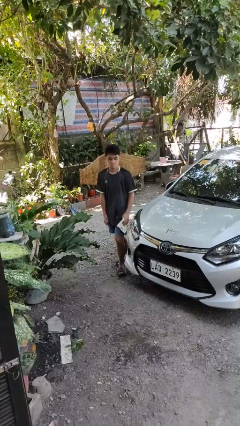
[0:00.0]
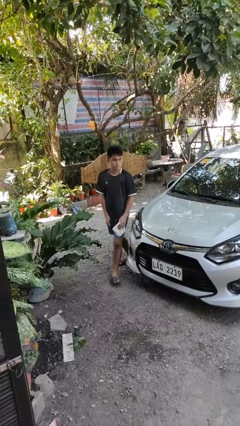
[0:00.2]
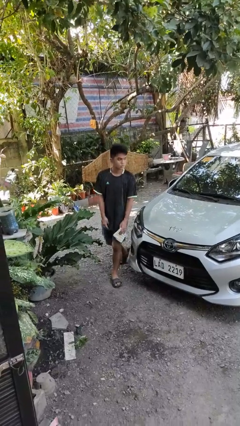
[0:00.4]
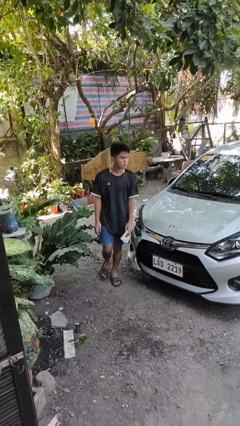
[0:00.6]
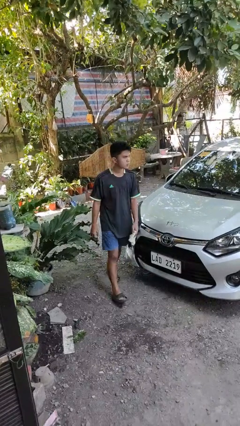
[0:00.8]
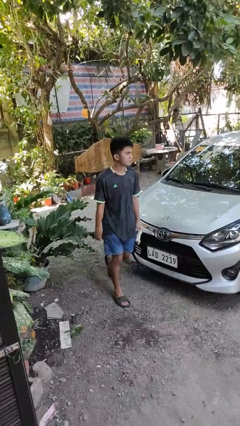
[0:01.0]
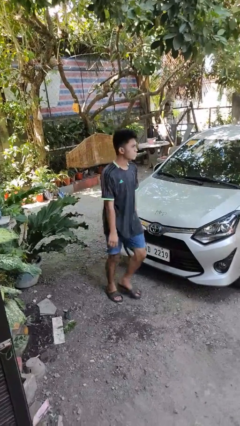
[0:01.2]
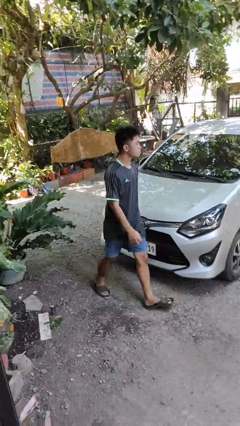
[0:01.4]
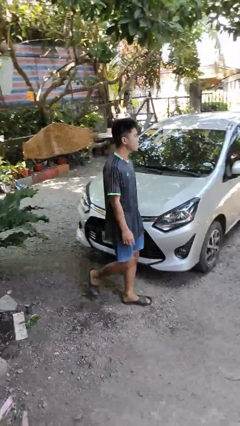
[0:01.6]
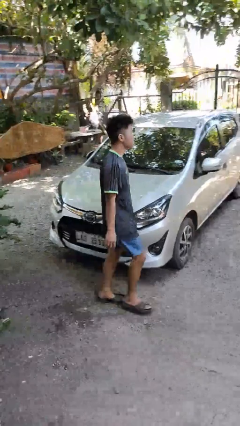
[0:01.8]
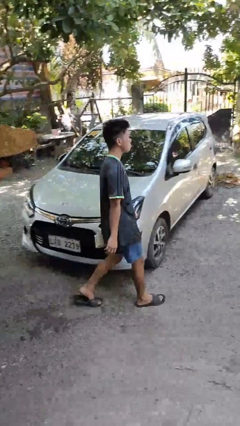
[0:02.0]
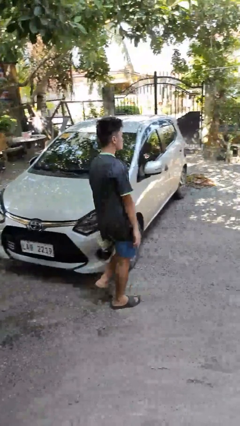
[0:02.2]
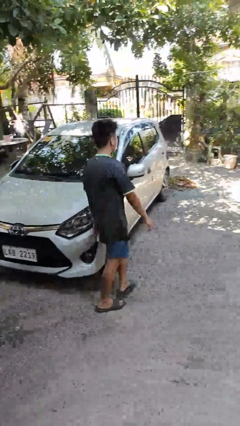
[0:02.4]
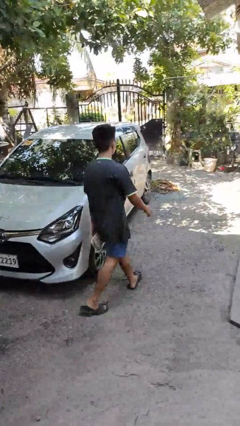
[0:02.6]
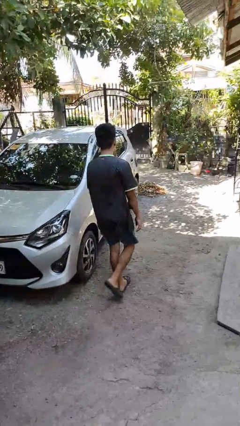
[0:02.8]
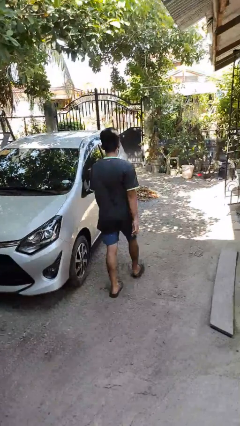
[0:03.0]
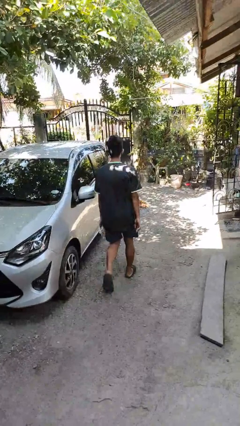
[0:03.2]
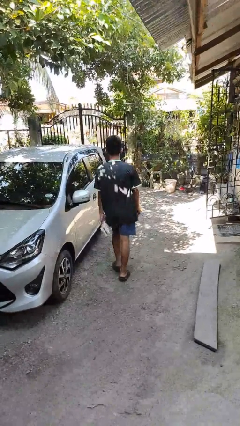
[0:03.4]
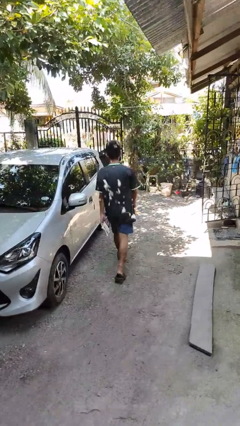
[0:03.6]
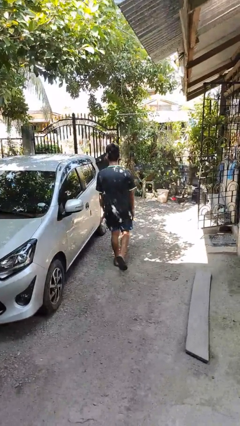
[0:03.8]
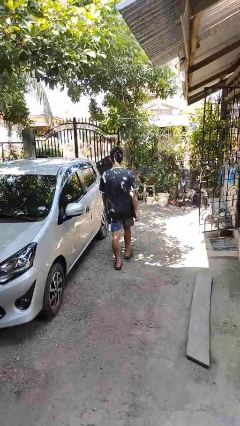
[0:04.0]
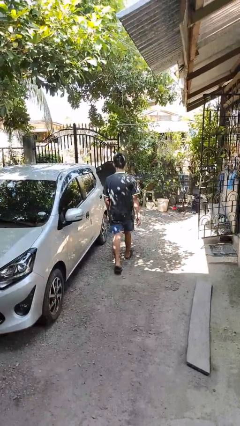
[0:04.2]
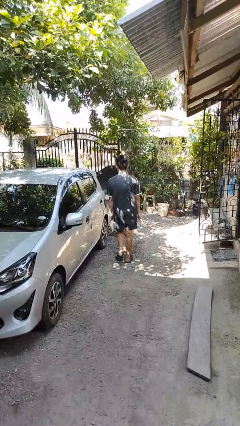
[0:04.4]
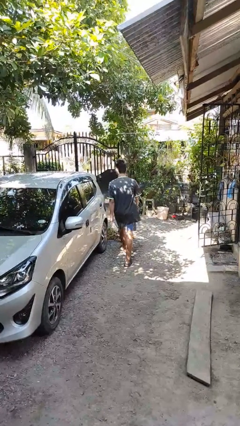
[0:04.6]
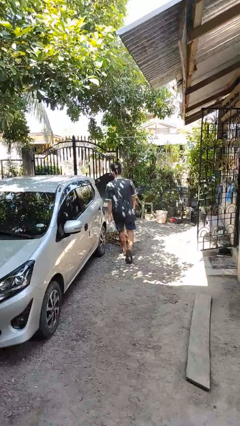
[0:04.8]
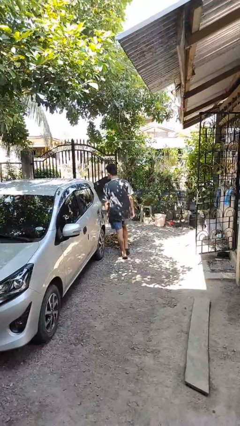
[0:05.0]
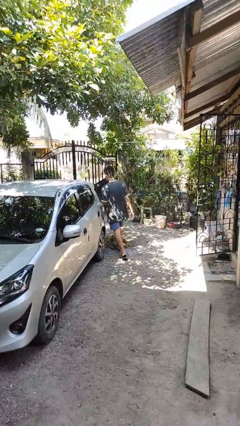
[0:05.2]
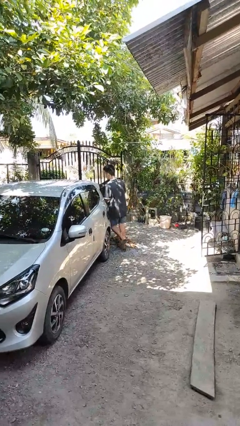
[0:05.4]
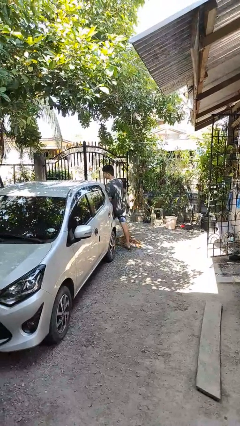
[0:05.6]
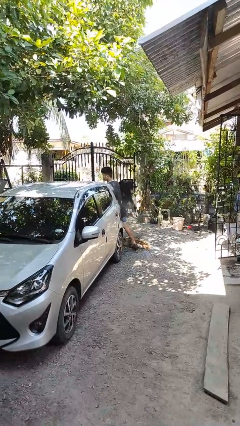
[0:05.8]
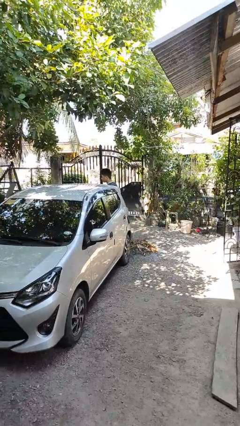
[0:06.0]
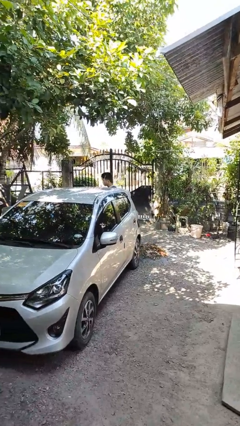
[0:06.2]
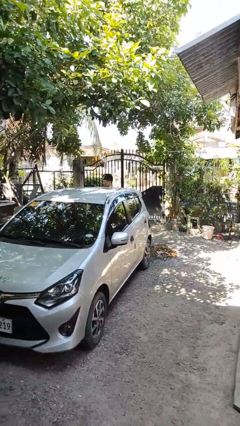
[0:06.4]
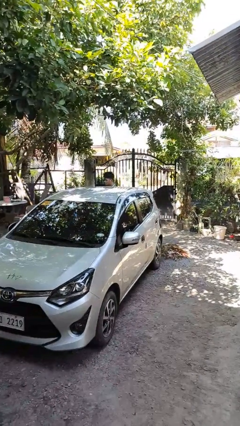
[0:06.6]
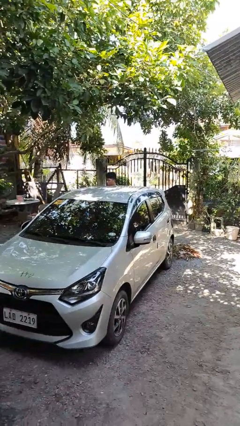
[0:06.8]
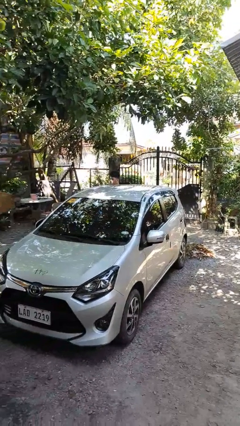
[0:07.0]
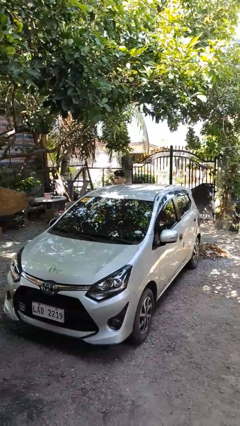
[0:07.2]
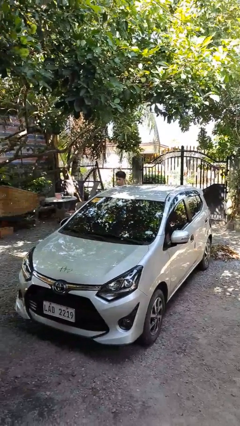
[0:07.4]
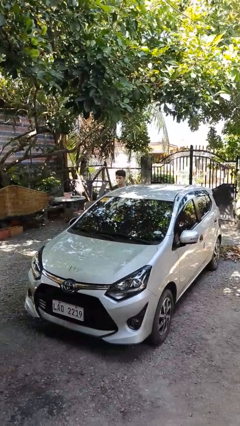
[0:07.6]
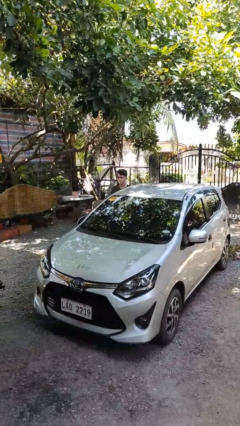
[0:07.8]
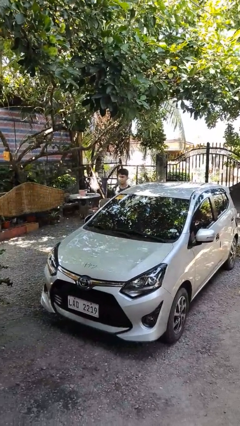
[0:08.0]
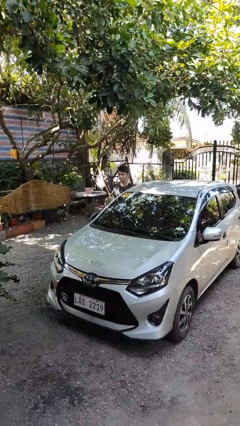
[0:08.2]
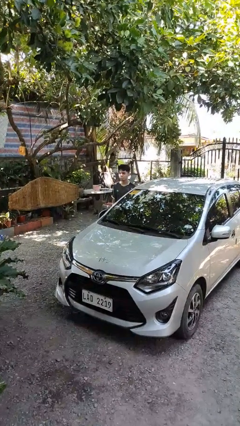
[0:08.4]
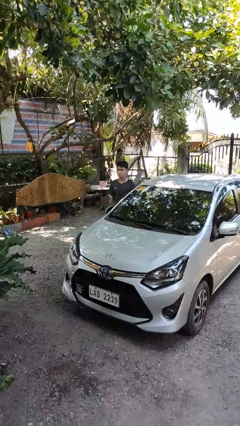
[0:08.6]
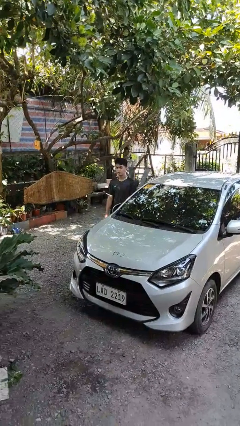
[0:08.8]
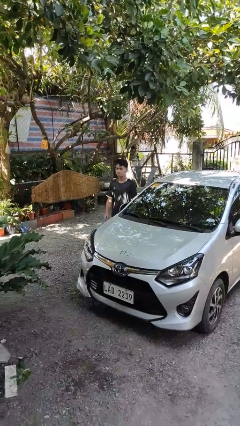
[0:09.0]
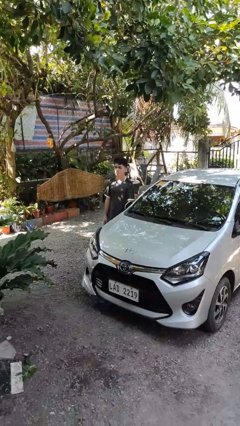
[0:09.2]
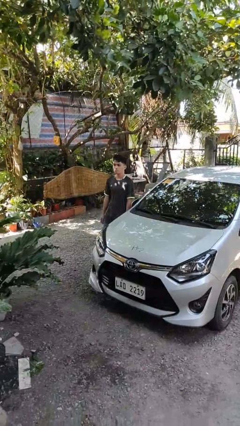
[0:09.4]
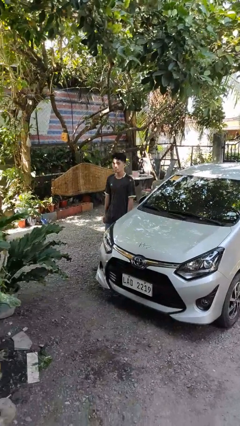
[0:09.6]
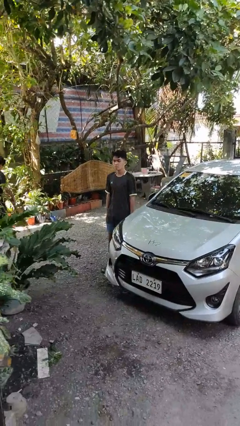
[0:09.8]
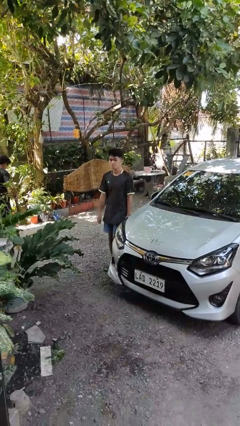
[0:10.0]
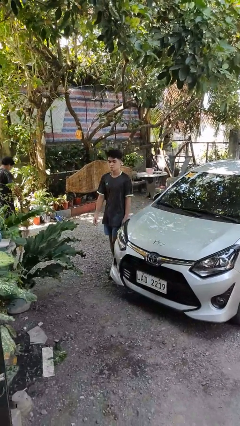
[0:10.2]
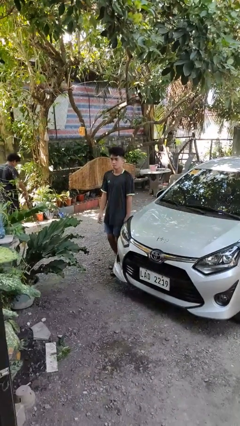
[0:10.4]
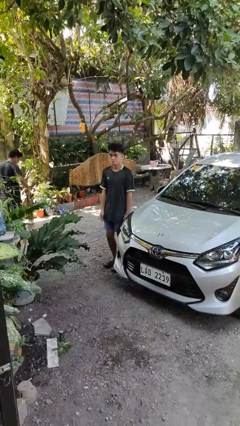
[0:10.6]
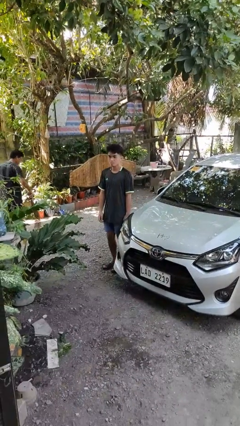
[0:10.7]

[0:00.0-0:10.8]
person walks around car

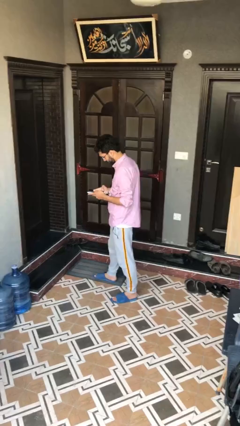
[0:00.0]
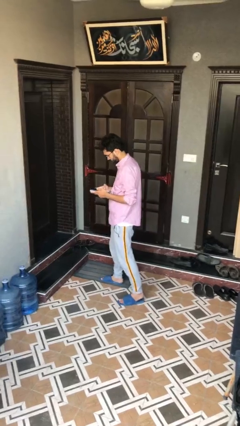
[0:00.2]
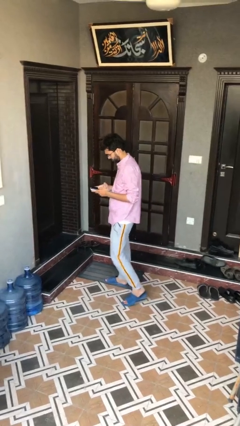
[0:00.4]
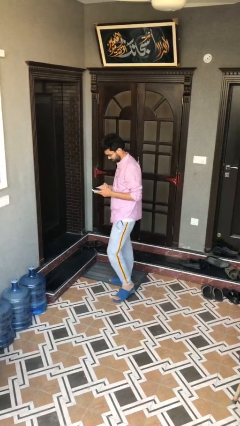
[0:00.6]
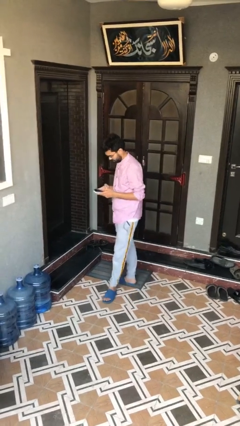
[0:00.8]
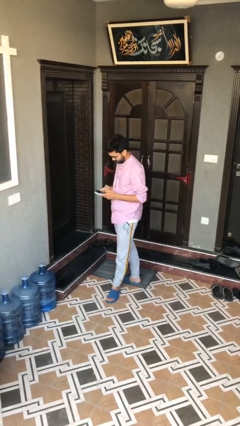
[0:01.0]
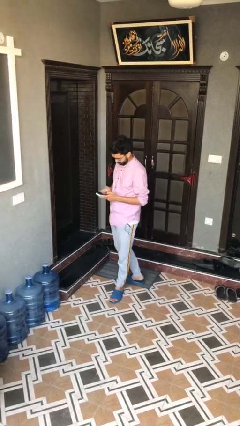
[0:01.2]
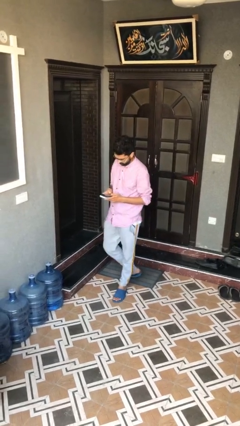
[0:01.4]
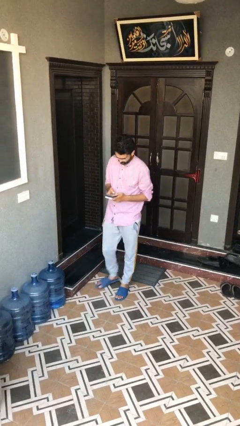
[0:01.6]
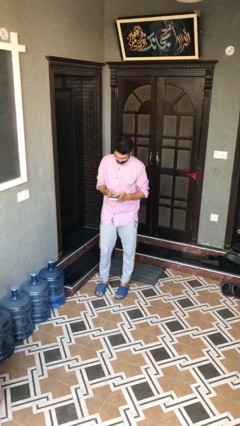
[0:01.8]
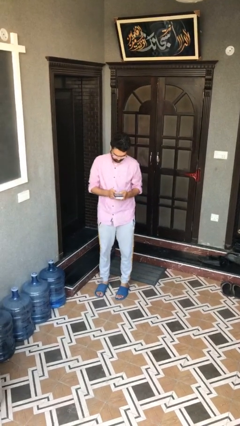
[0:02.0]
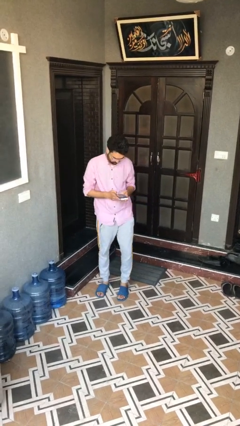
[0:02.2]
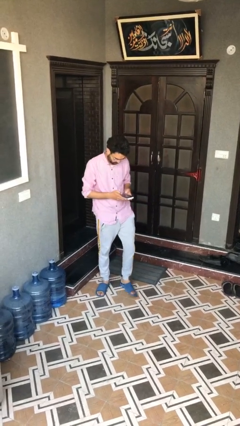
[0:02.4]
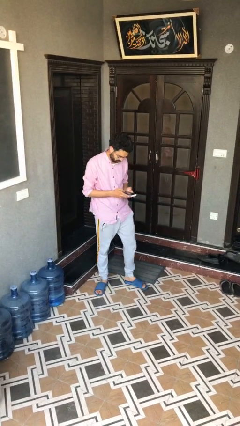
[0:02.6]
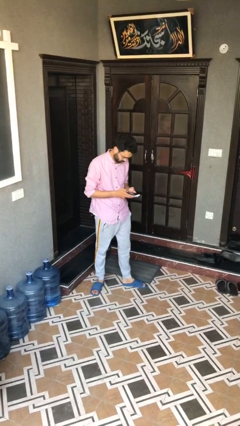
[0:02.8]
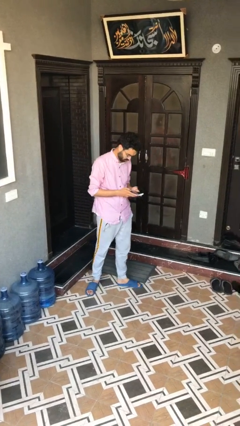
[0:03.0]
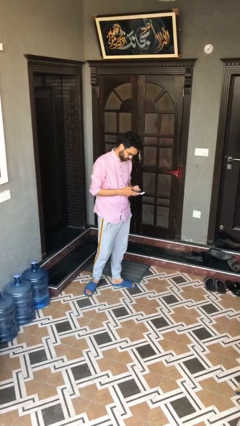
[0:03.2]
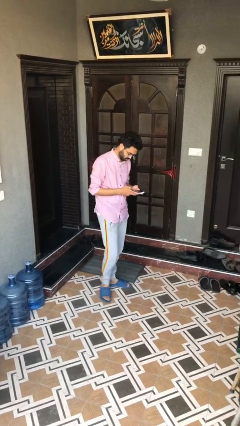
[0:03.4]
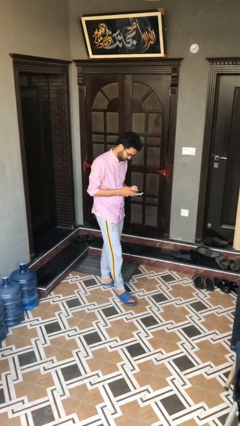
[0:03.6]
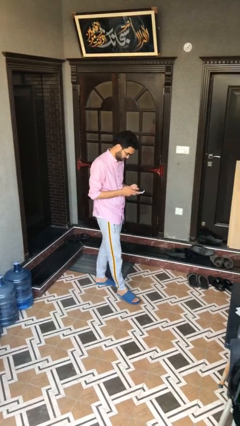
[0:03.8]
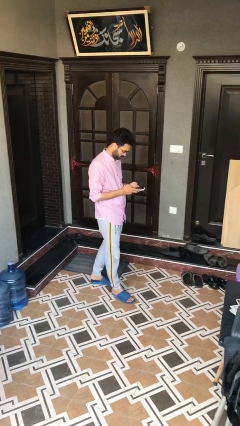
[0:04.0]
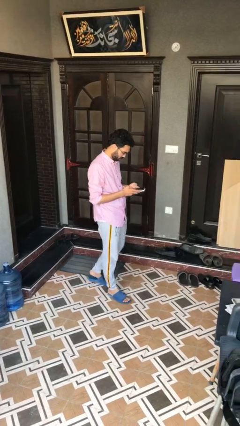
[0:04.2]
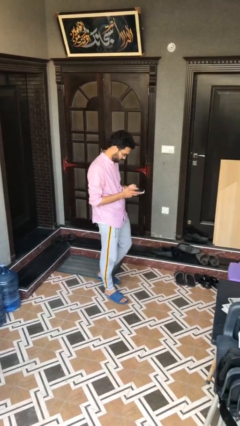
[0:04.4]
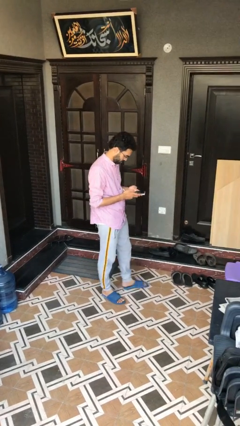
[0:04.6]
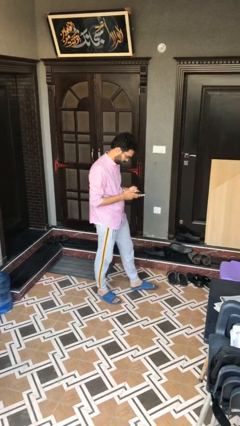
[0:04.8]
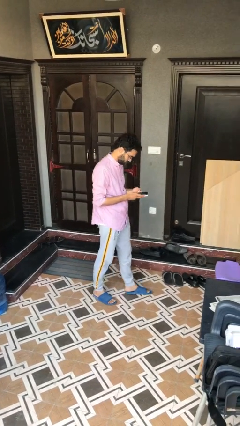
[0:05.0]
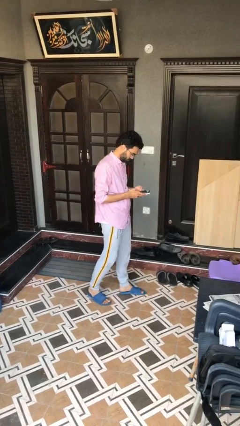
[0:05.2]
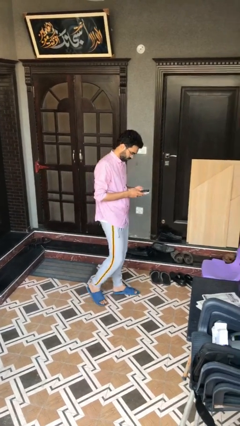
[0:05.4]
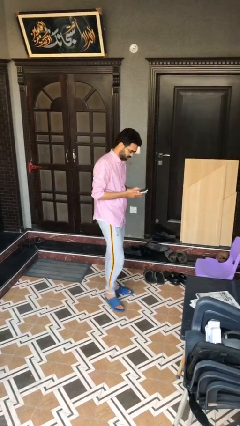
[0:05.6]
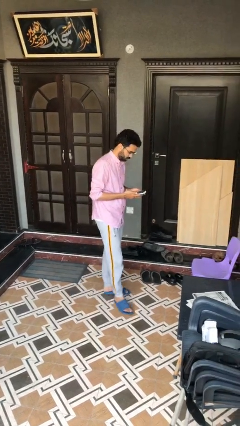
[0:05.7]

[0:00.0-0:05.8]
person texts on phone

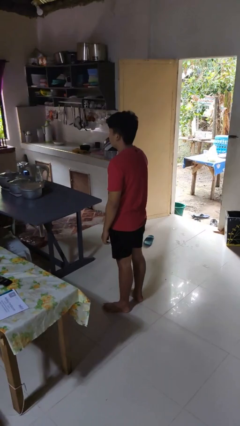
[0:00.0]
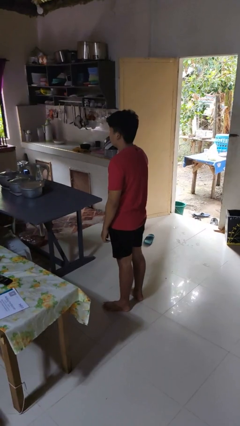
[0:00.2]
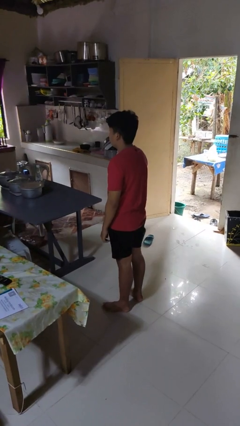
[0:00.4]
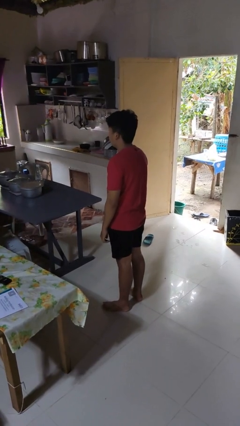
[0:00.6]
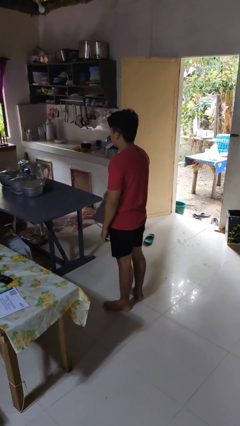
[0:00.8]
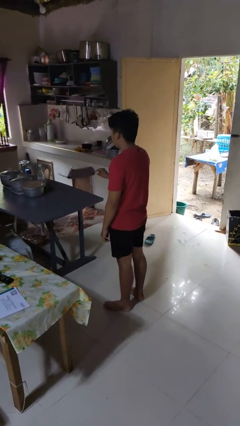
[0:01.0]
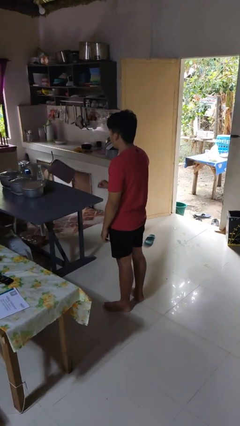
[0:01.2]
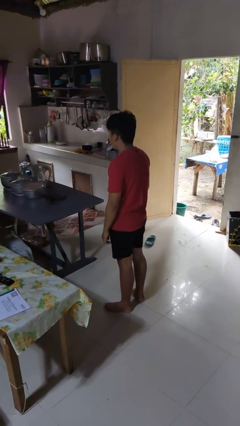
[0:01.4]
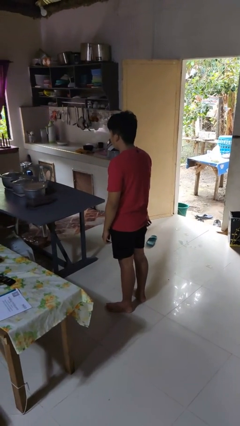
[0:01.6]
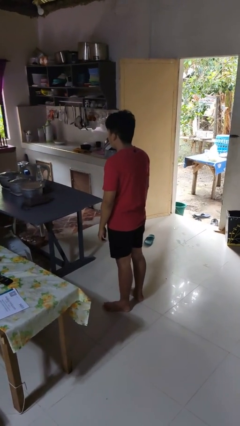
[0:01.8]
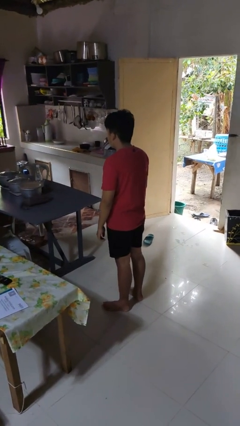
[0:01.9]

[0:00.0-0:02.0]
person throws object on table
